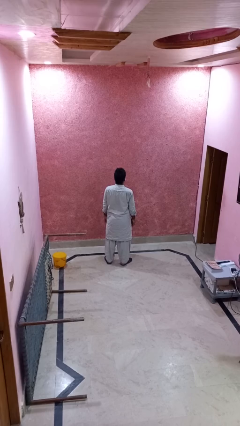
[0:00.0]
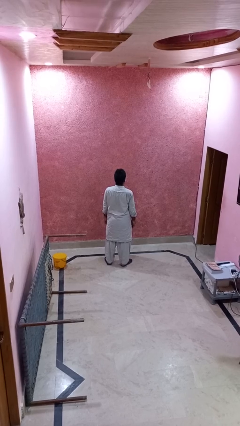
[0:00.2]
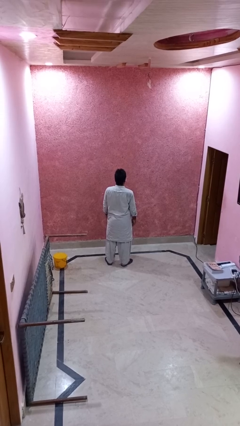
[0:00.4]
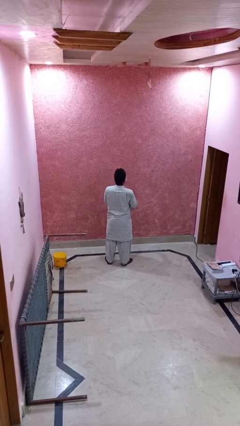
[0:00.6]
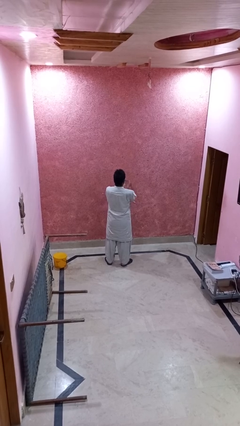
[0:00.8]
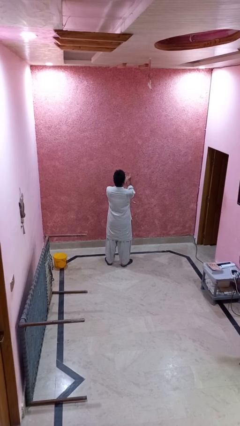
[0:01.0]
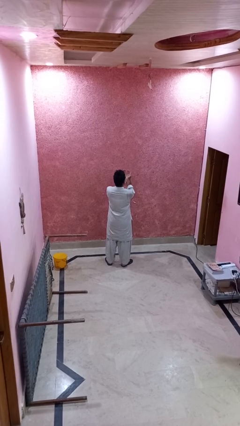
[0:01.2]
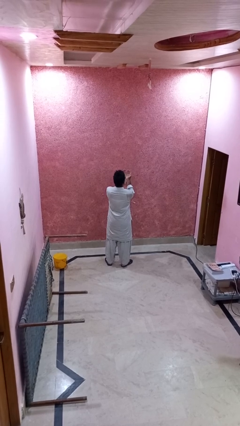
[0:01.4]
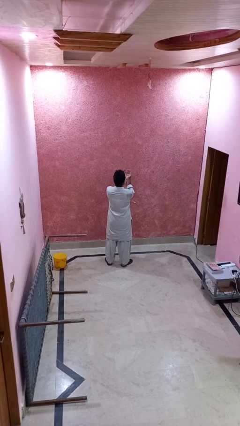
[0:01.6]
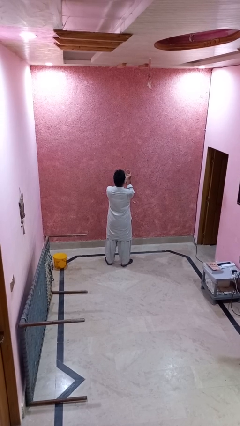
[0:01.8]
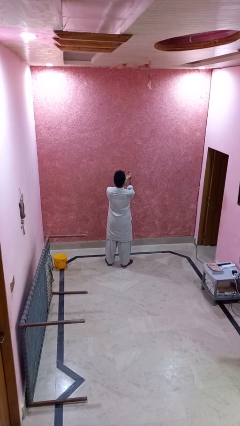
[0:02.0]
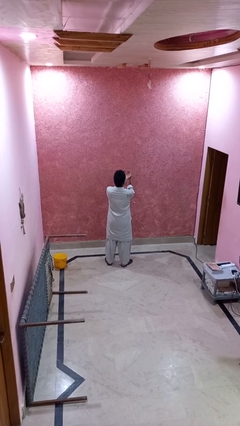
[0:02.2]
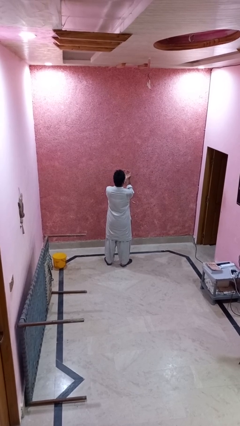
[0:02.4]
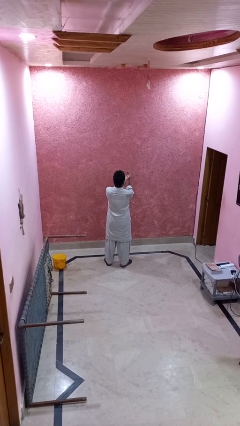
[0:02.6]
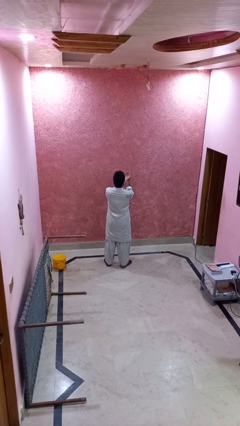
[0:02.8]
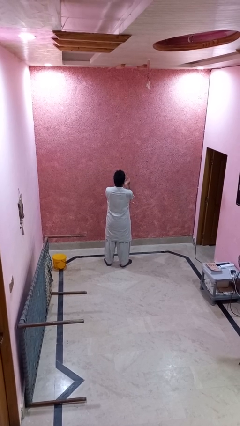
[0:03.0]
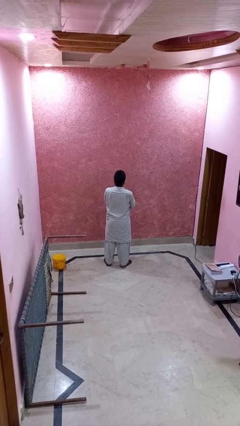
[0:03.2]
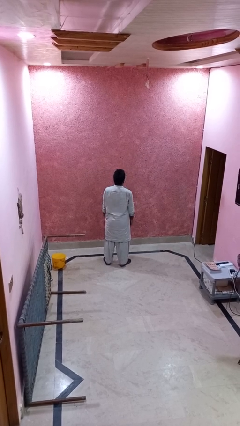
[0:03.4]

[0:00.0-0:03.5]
person prays

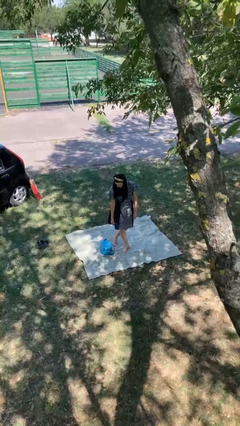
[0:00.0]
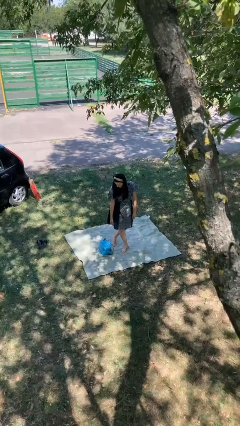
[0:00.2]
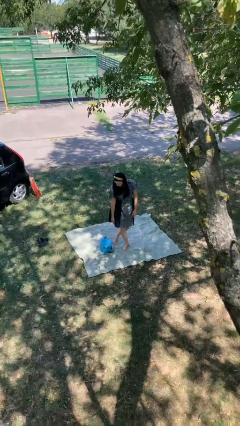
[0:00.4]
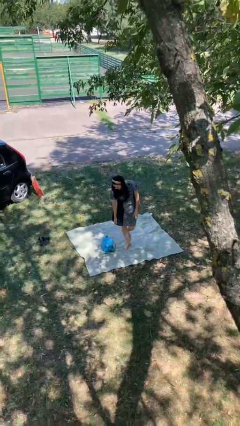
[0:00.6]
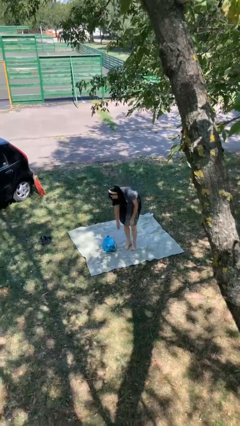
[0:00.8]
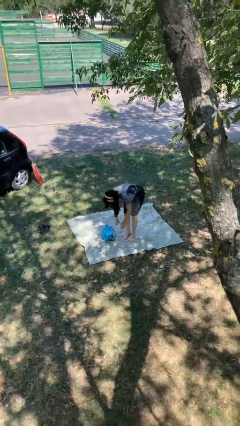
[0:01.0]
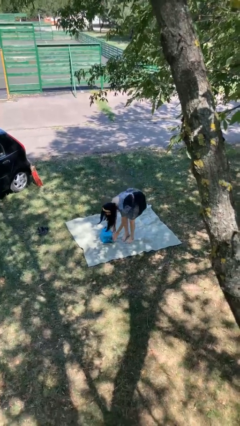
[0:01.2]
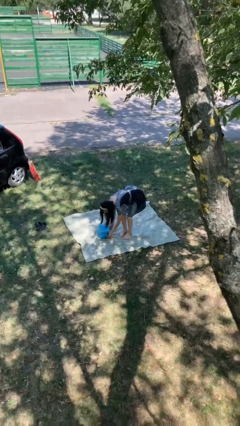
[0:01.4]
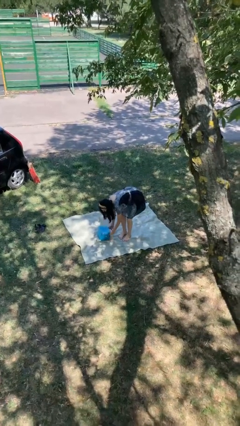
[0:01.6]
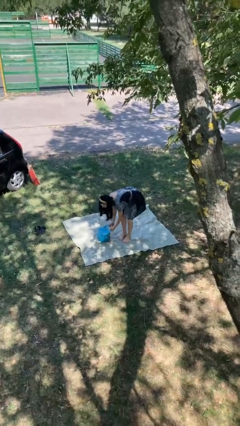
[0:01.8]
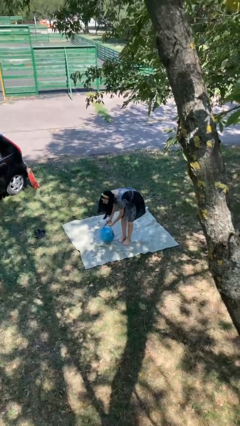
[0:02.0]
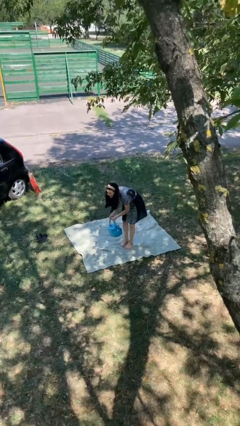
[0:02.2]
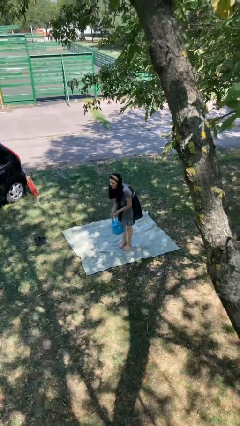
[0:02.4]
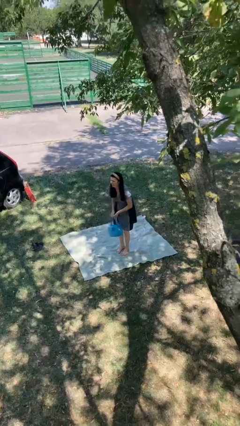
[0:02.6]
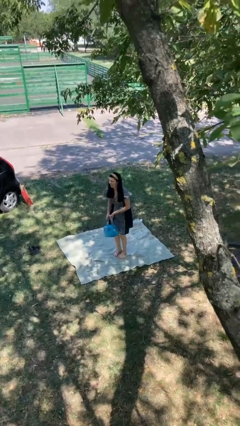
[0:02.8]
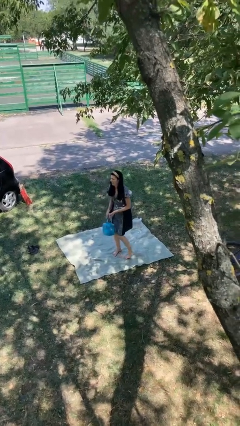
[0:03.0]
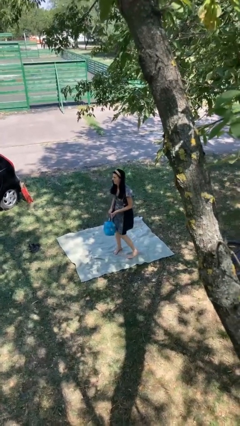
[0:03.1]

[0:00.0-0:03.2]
person picks up object from floor

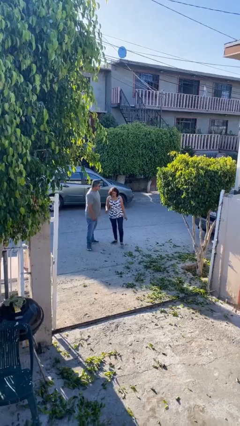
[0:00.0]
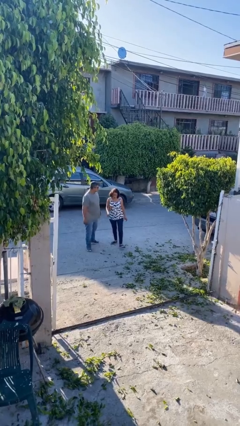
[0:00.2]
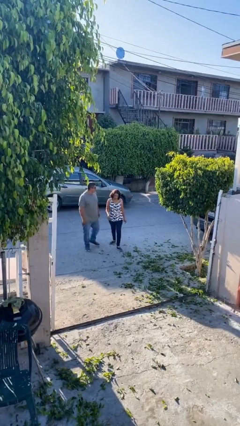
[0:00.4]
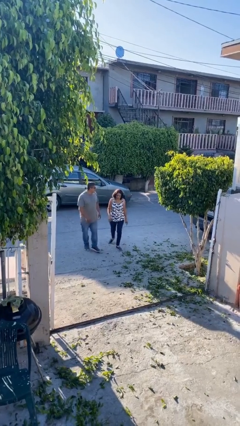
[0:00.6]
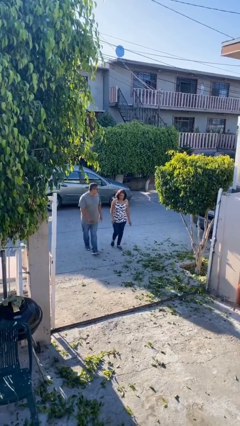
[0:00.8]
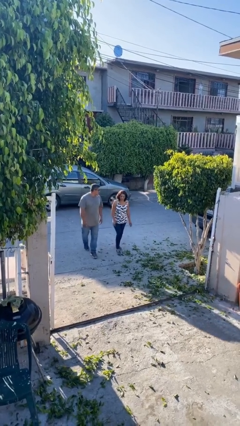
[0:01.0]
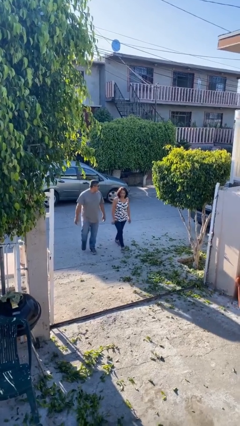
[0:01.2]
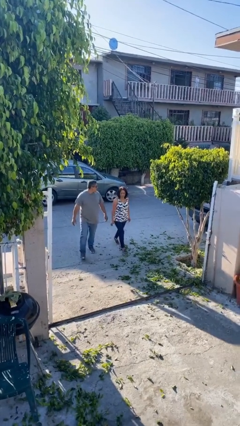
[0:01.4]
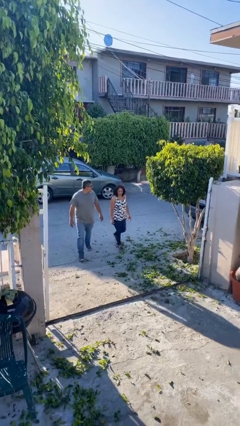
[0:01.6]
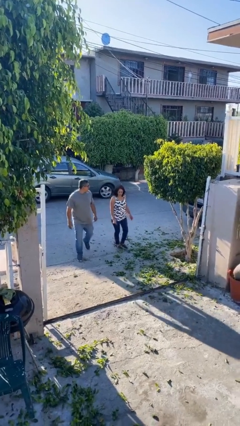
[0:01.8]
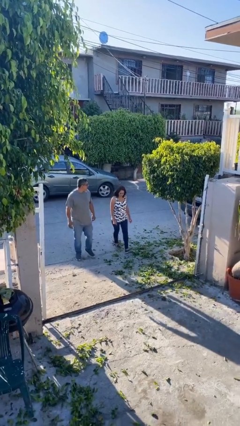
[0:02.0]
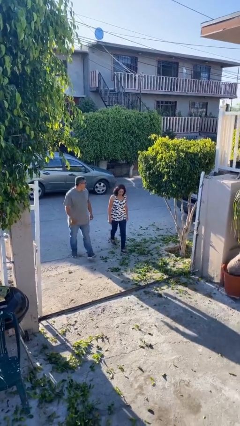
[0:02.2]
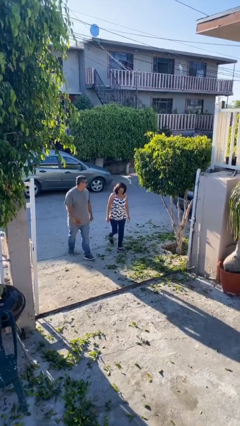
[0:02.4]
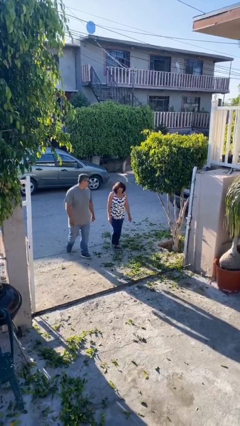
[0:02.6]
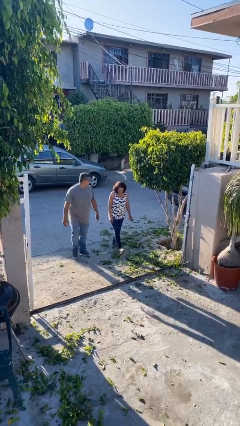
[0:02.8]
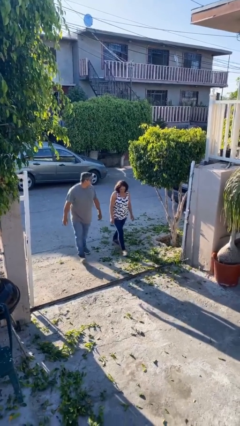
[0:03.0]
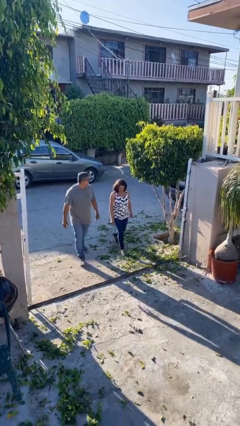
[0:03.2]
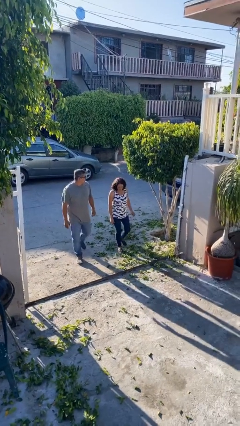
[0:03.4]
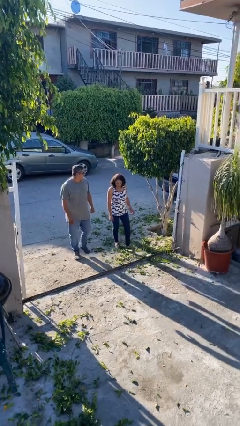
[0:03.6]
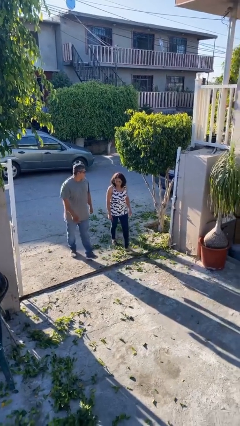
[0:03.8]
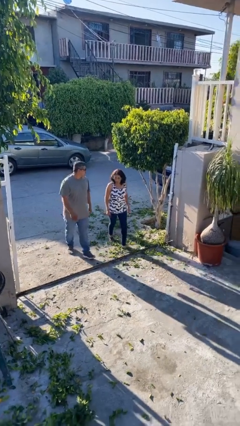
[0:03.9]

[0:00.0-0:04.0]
person talks to person

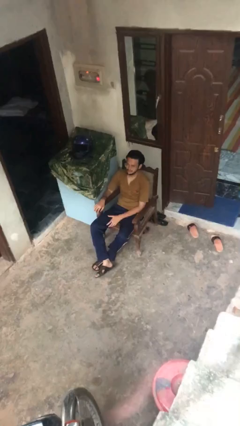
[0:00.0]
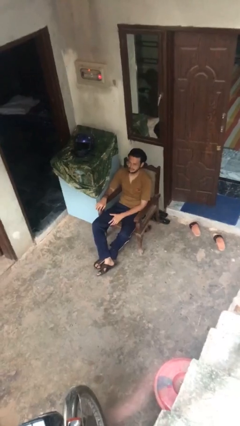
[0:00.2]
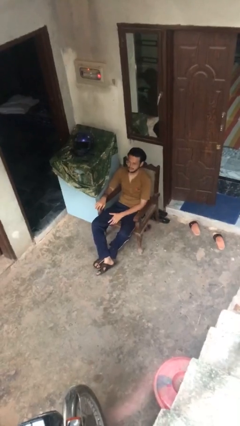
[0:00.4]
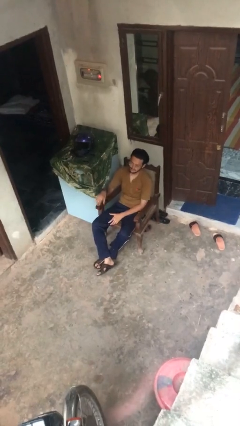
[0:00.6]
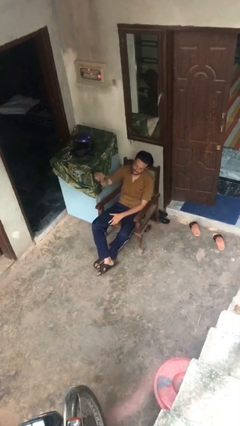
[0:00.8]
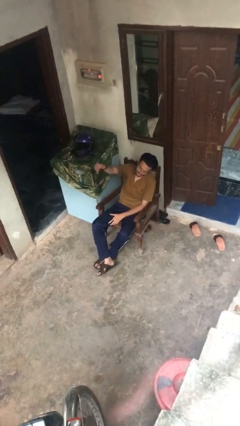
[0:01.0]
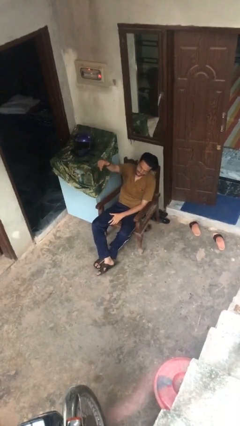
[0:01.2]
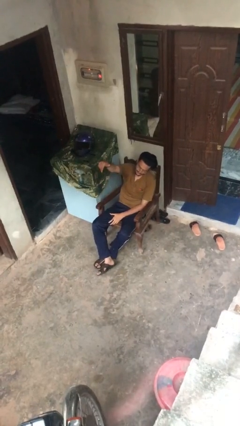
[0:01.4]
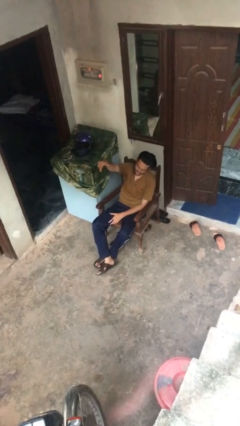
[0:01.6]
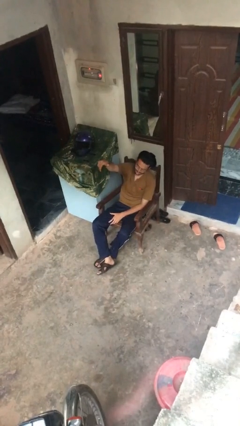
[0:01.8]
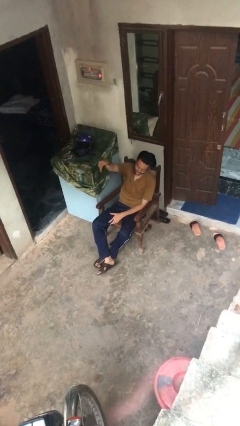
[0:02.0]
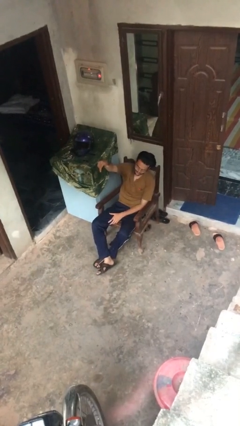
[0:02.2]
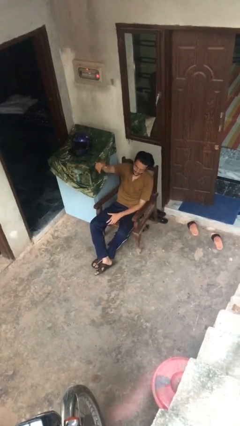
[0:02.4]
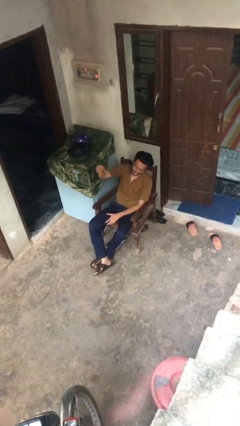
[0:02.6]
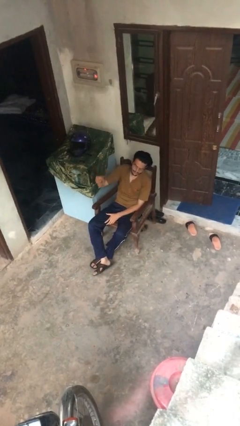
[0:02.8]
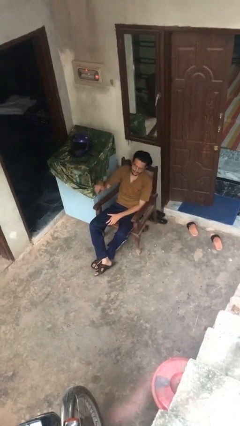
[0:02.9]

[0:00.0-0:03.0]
person gestures come here

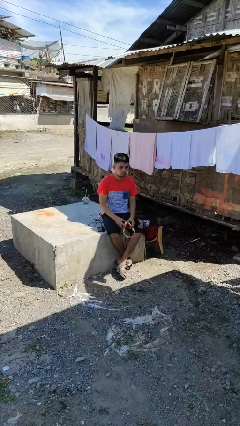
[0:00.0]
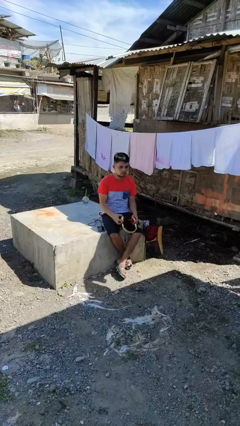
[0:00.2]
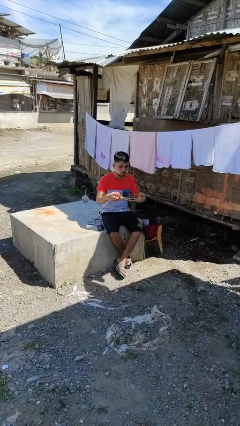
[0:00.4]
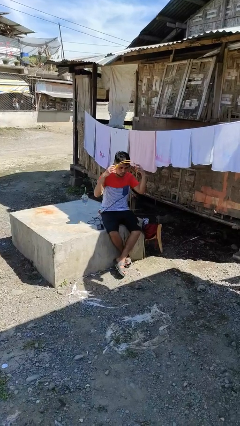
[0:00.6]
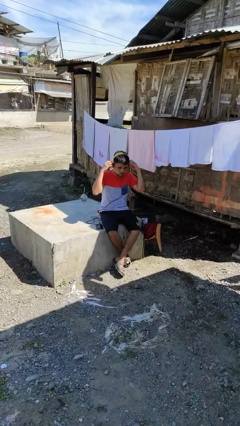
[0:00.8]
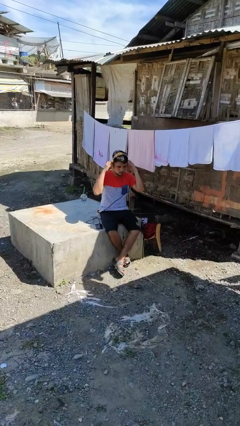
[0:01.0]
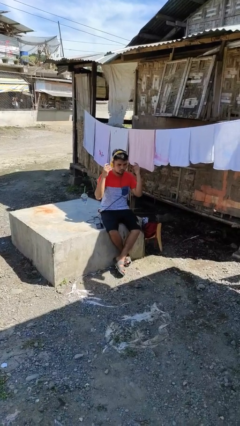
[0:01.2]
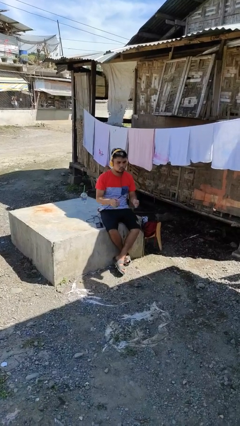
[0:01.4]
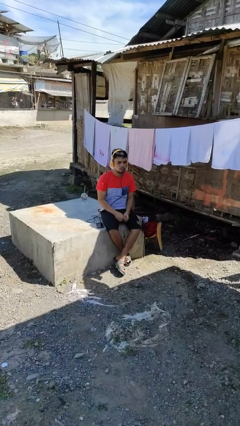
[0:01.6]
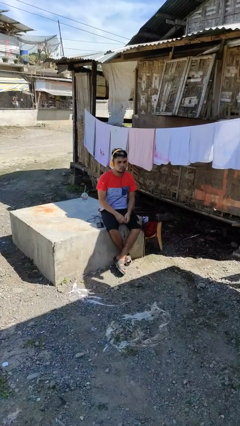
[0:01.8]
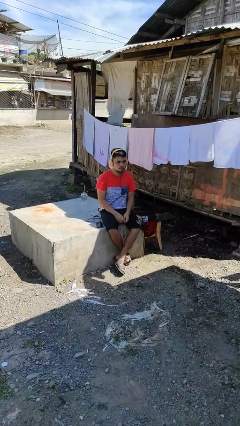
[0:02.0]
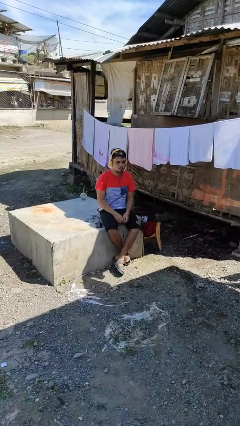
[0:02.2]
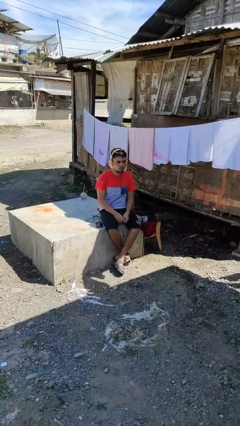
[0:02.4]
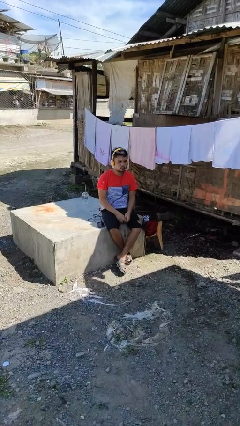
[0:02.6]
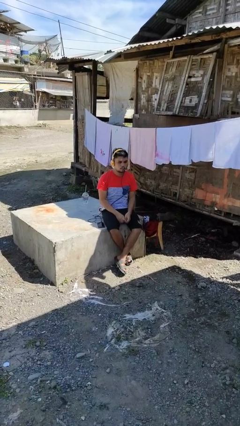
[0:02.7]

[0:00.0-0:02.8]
person puts on headphones

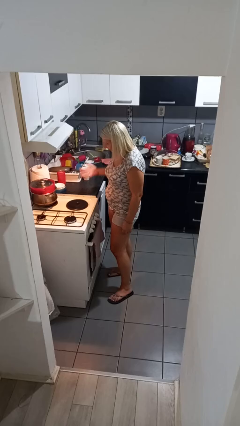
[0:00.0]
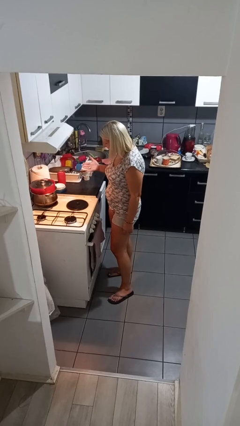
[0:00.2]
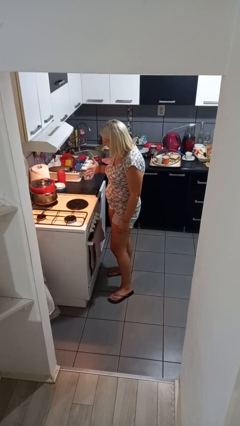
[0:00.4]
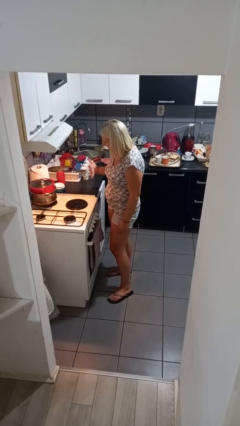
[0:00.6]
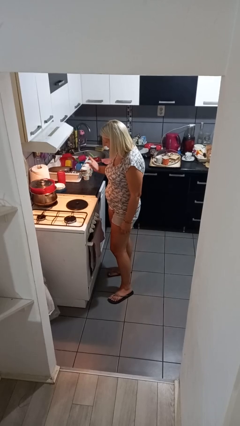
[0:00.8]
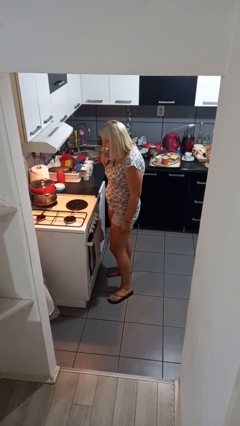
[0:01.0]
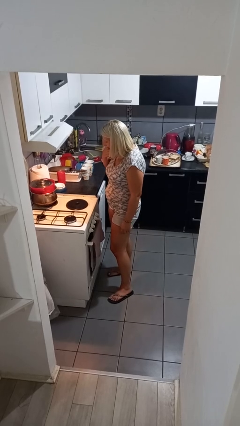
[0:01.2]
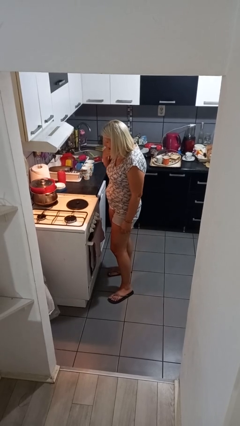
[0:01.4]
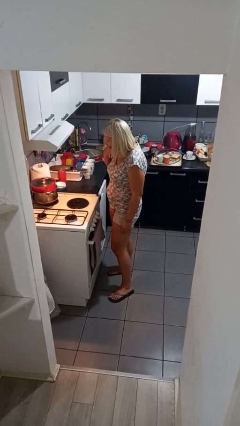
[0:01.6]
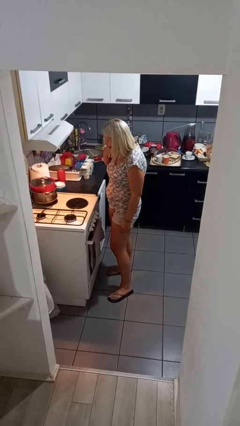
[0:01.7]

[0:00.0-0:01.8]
person burns hand
